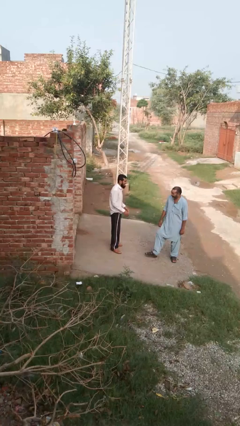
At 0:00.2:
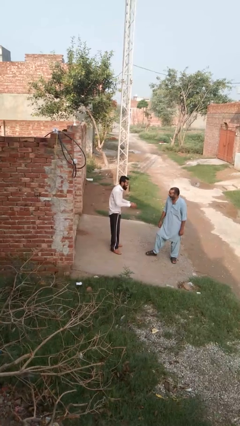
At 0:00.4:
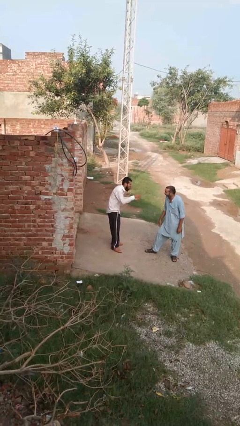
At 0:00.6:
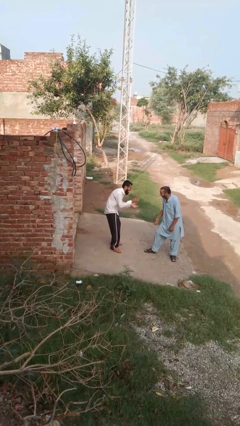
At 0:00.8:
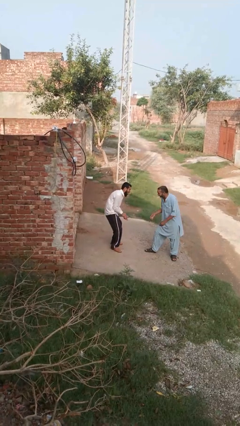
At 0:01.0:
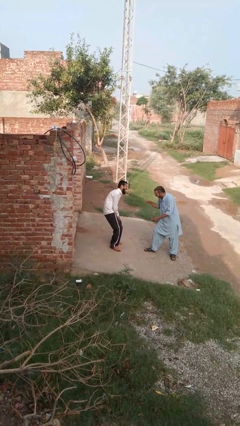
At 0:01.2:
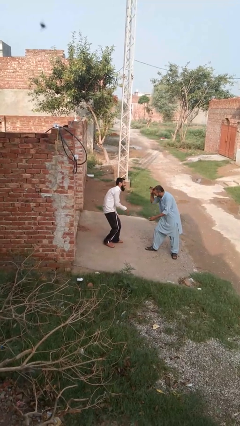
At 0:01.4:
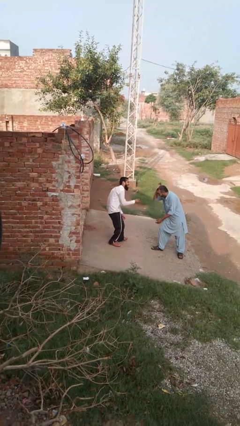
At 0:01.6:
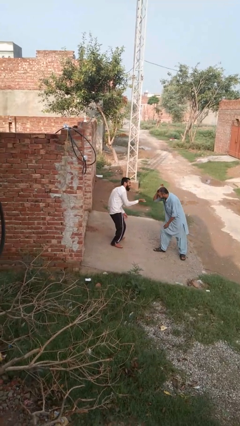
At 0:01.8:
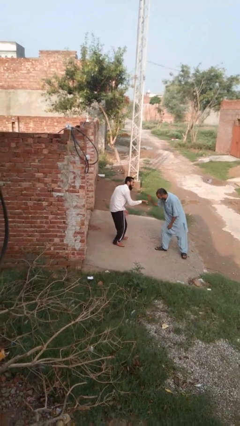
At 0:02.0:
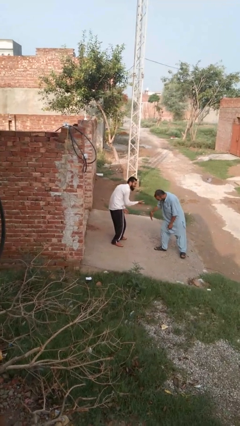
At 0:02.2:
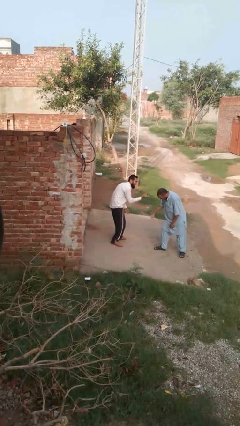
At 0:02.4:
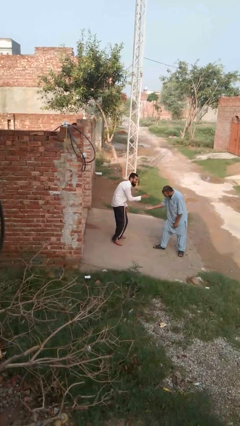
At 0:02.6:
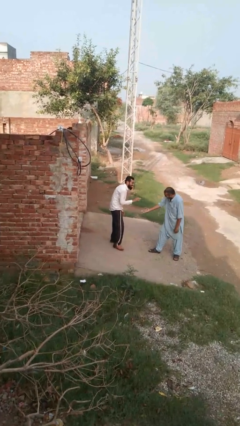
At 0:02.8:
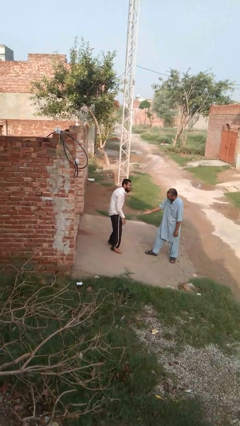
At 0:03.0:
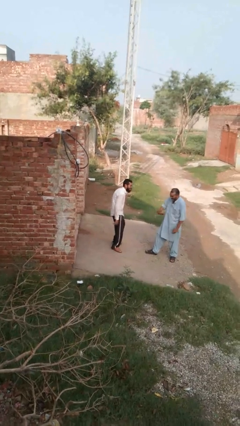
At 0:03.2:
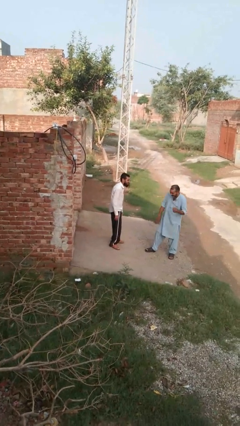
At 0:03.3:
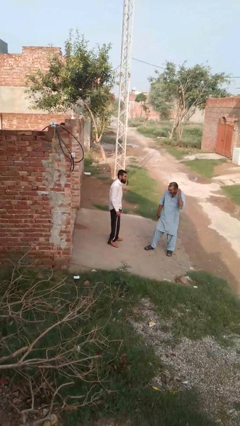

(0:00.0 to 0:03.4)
person laughs with person

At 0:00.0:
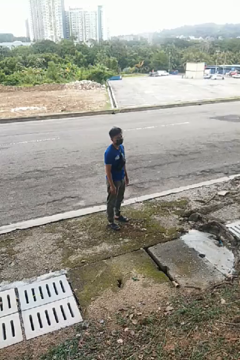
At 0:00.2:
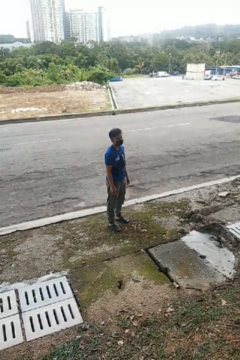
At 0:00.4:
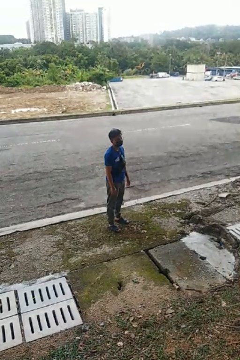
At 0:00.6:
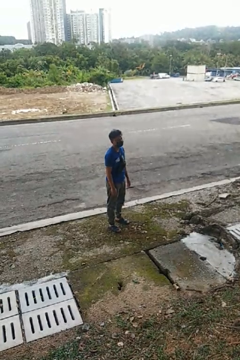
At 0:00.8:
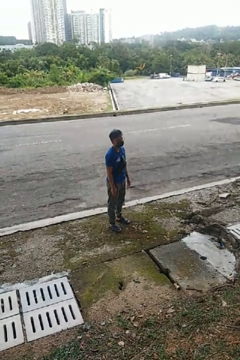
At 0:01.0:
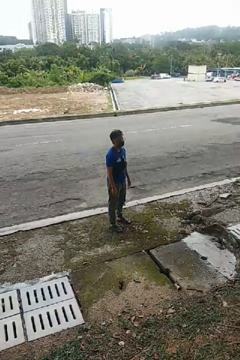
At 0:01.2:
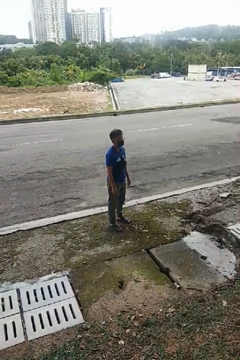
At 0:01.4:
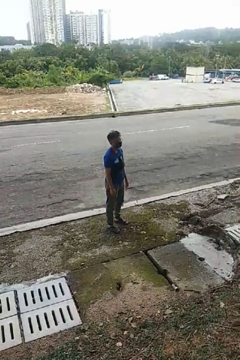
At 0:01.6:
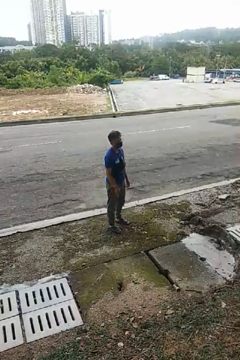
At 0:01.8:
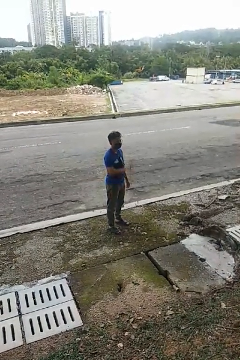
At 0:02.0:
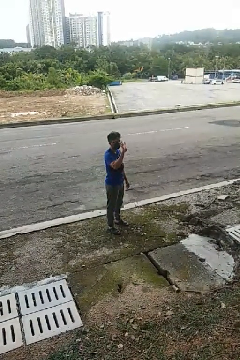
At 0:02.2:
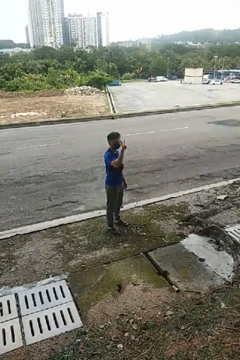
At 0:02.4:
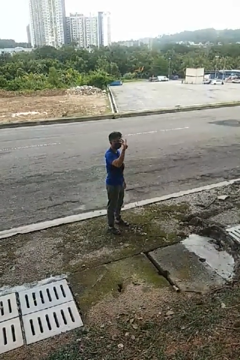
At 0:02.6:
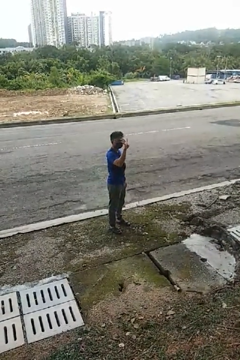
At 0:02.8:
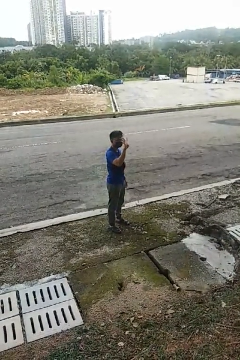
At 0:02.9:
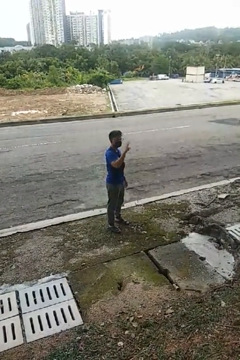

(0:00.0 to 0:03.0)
person gestures number four

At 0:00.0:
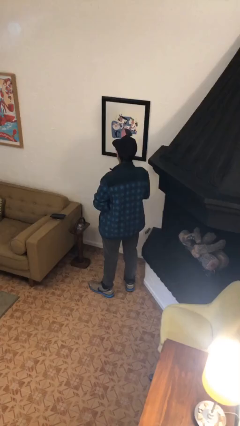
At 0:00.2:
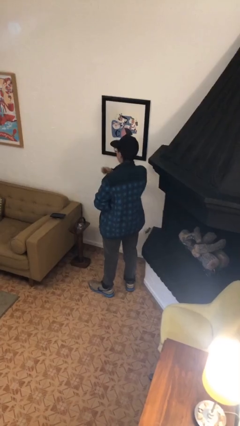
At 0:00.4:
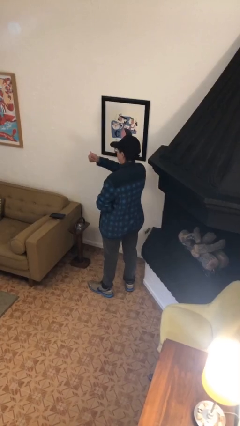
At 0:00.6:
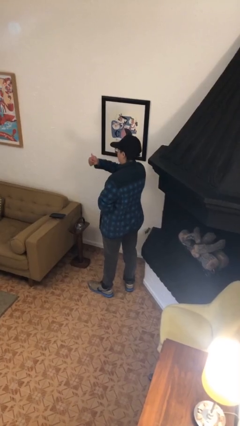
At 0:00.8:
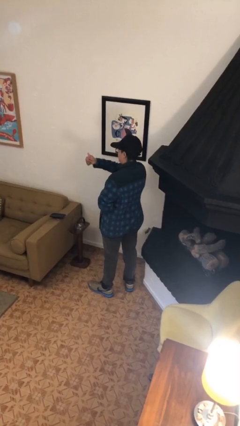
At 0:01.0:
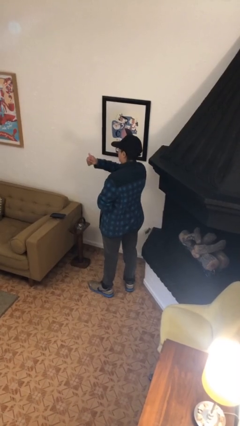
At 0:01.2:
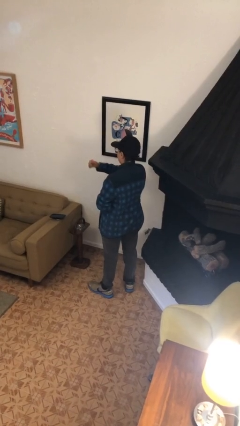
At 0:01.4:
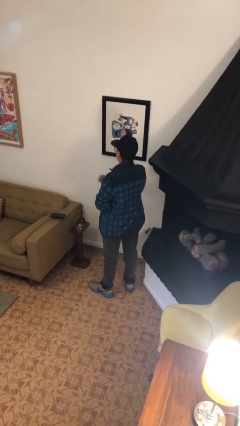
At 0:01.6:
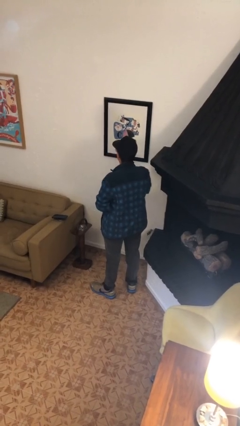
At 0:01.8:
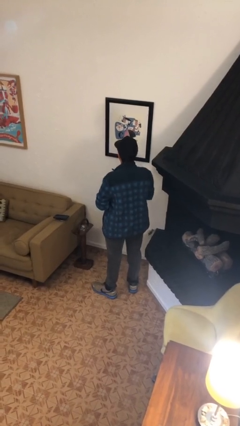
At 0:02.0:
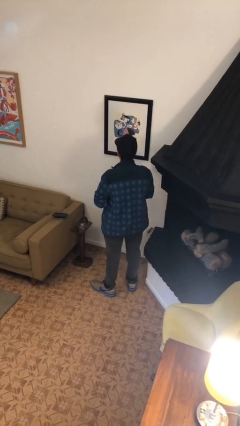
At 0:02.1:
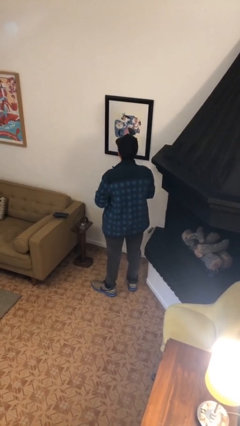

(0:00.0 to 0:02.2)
person gestures thumbs up

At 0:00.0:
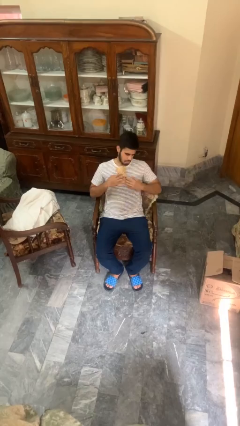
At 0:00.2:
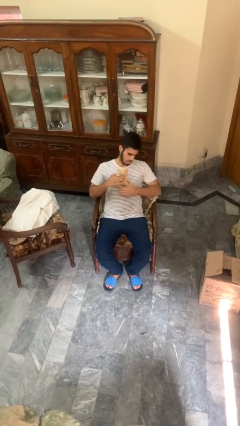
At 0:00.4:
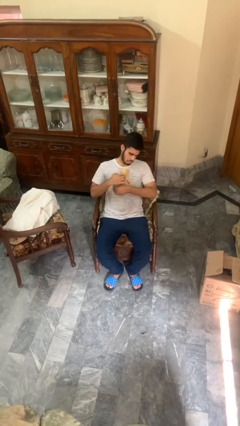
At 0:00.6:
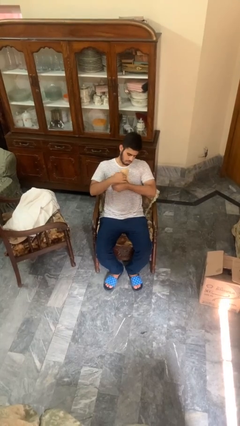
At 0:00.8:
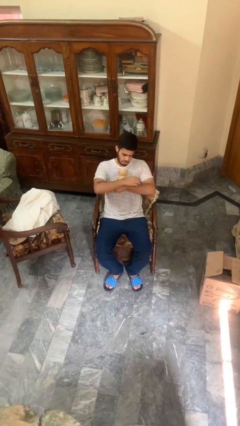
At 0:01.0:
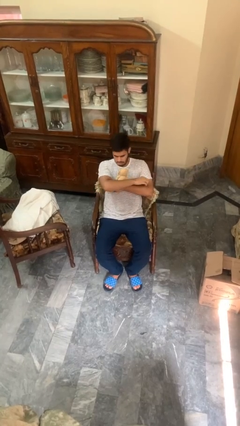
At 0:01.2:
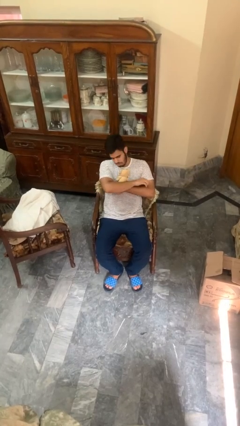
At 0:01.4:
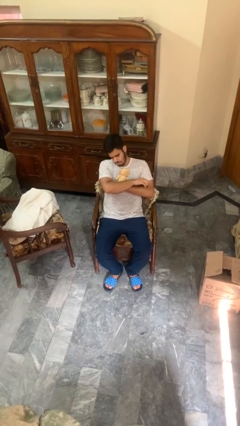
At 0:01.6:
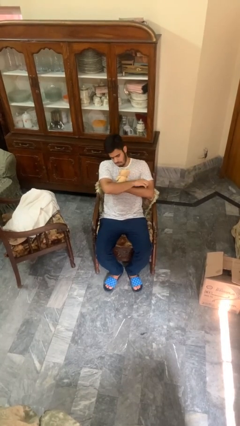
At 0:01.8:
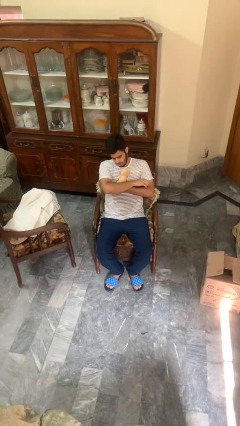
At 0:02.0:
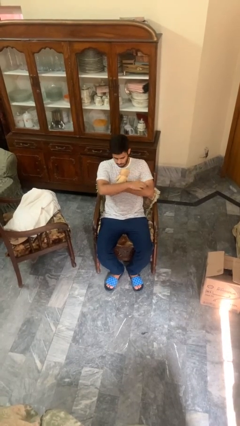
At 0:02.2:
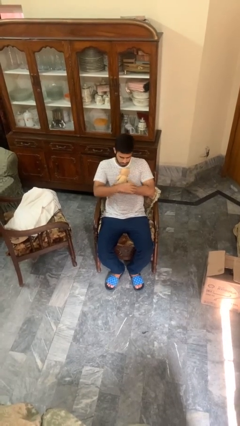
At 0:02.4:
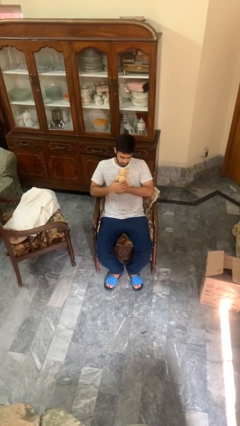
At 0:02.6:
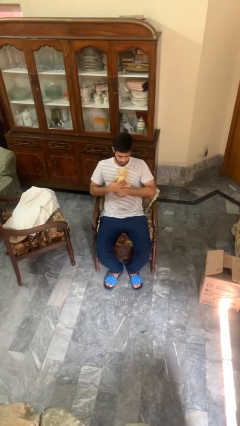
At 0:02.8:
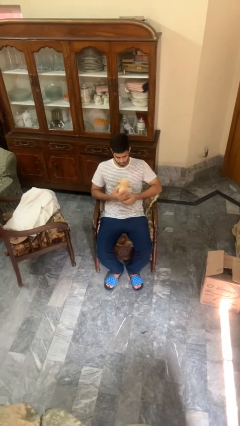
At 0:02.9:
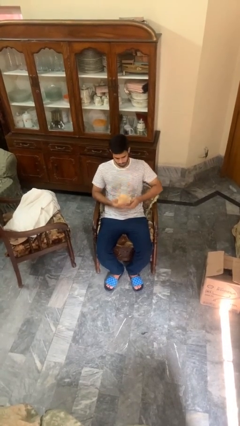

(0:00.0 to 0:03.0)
person hugs stuffed animal

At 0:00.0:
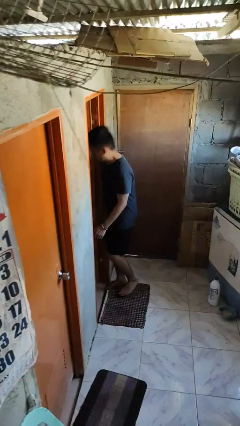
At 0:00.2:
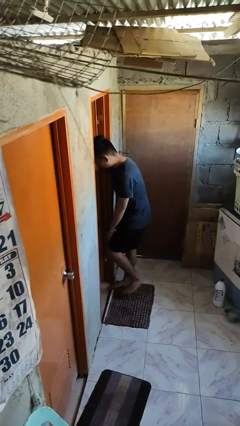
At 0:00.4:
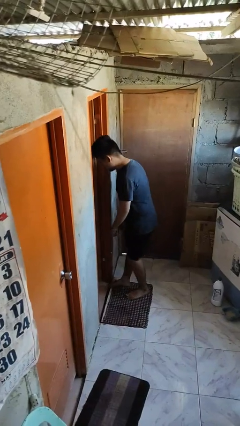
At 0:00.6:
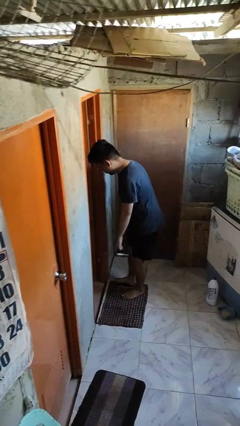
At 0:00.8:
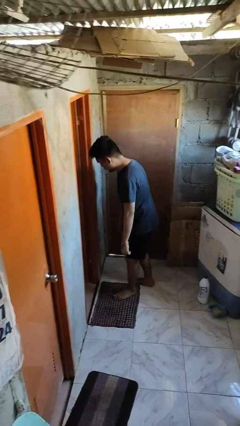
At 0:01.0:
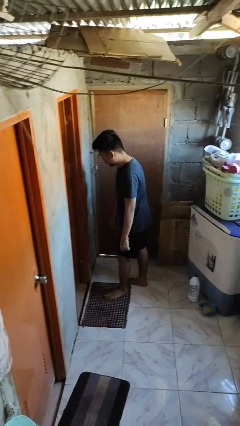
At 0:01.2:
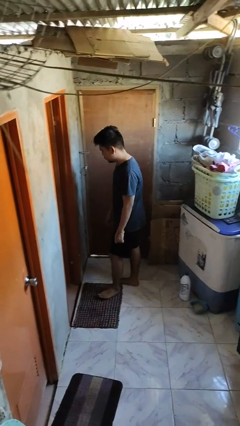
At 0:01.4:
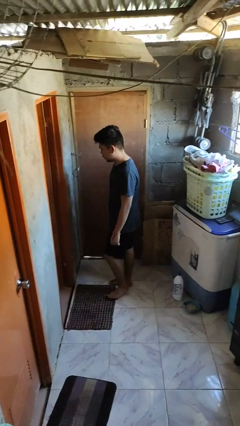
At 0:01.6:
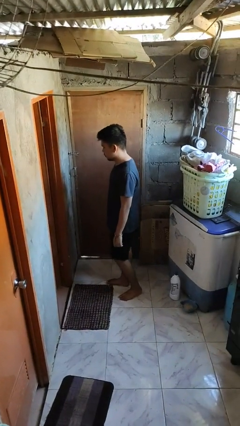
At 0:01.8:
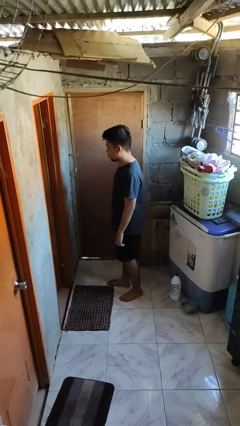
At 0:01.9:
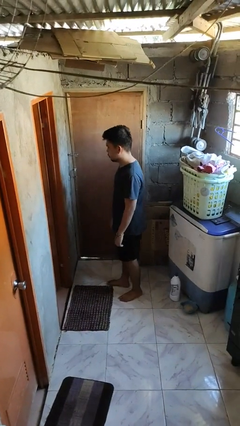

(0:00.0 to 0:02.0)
person bumps into wall

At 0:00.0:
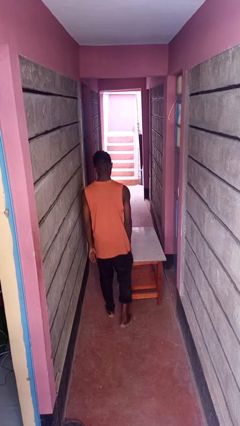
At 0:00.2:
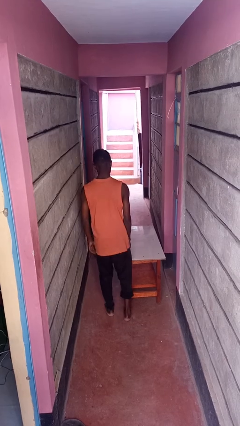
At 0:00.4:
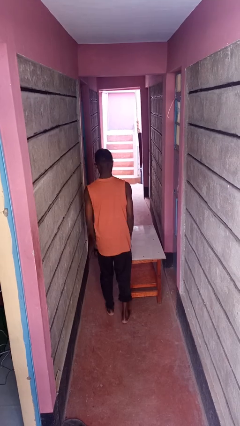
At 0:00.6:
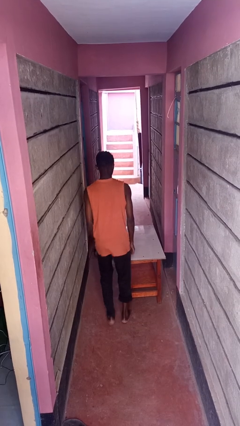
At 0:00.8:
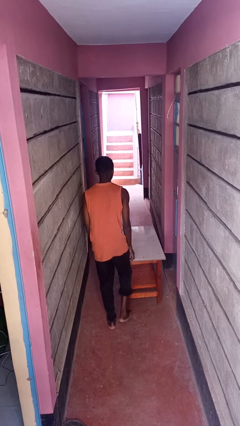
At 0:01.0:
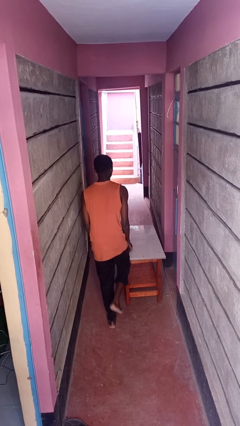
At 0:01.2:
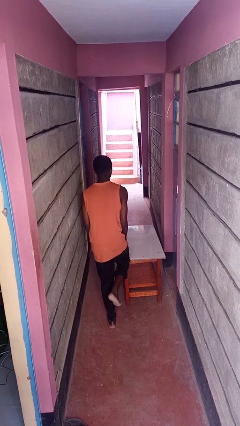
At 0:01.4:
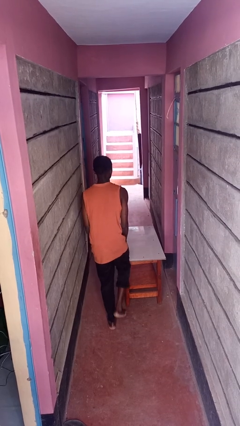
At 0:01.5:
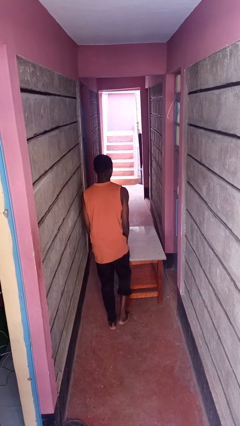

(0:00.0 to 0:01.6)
person stubs toe

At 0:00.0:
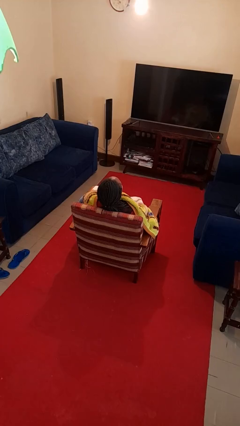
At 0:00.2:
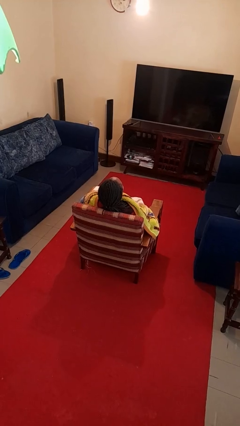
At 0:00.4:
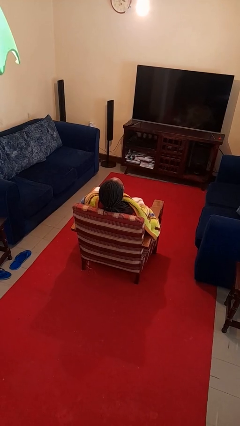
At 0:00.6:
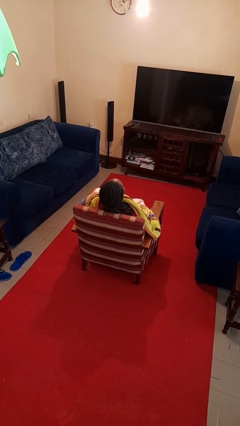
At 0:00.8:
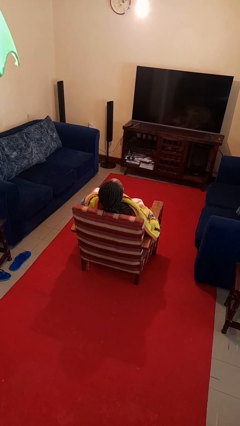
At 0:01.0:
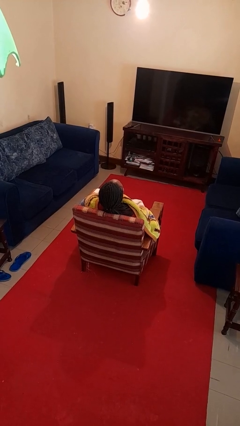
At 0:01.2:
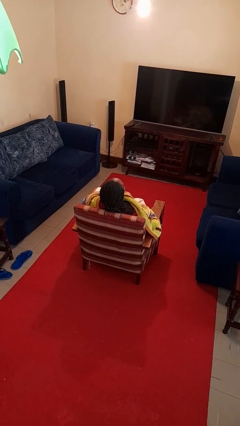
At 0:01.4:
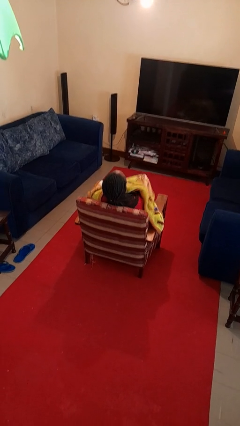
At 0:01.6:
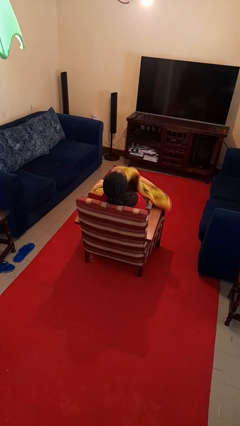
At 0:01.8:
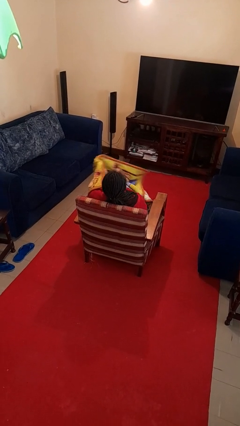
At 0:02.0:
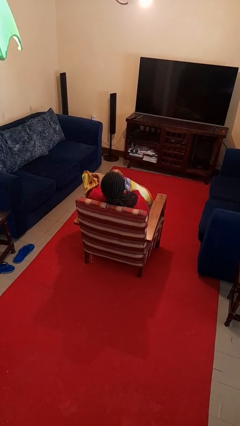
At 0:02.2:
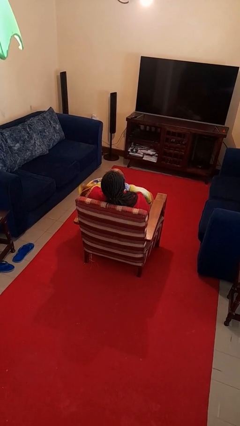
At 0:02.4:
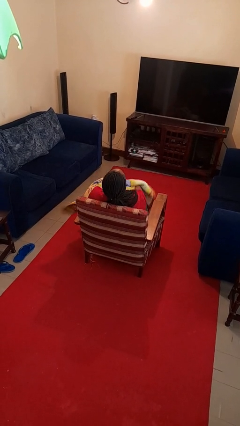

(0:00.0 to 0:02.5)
person uncovers with blanket
